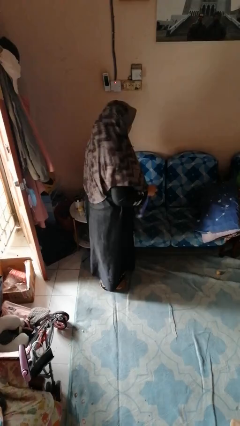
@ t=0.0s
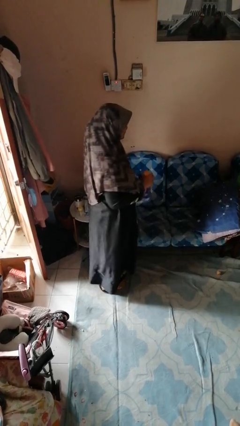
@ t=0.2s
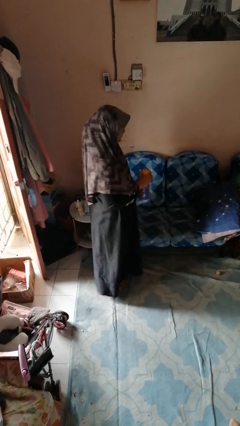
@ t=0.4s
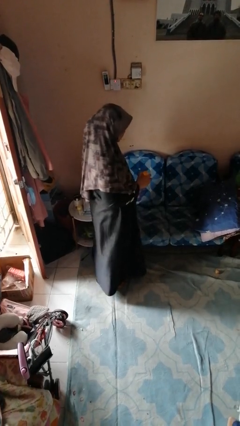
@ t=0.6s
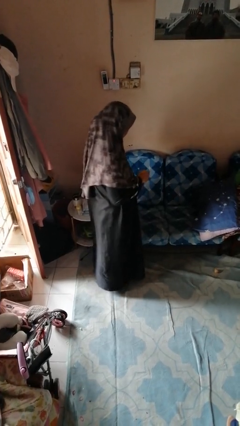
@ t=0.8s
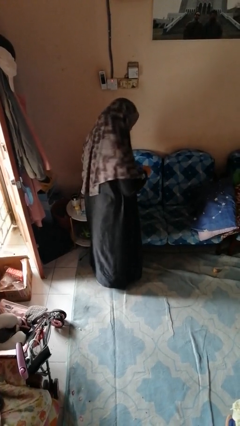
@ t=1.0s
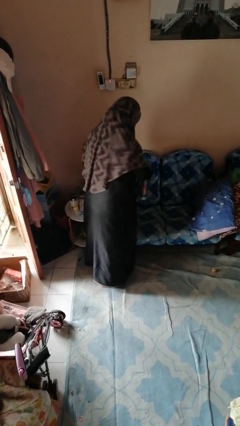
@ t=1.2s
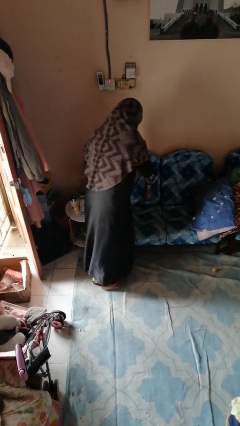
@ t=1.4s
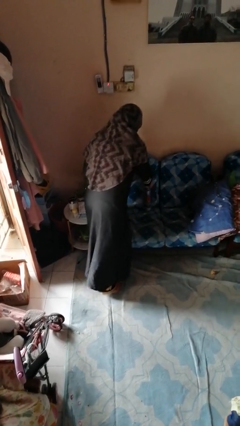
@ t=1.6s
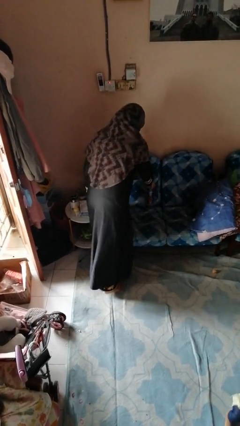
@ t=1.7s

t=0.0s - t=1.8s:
person puts down object on couch

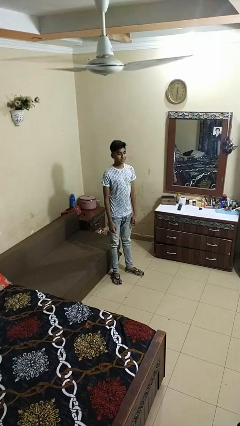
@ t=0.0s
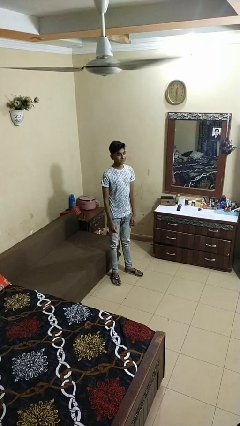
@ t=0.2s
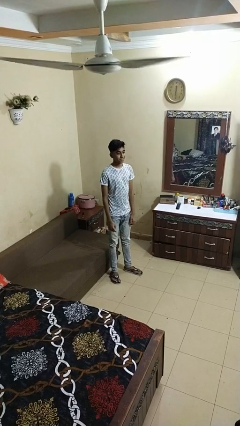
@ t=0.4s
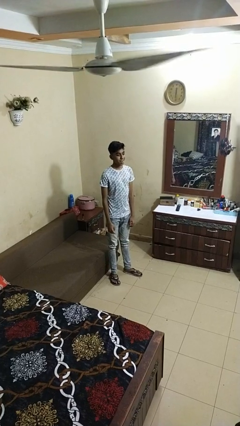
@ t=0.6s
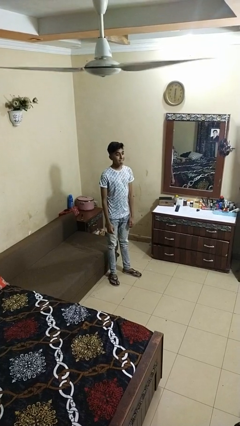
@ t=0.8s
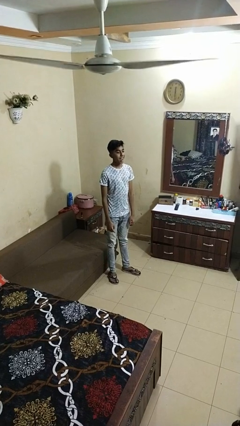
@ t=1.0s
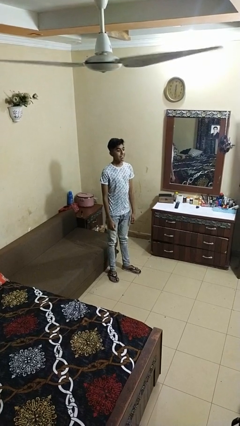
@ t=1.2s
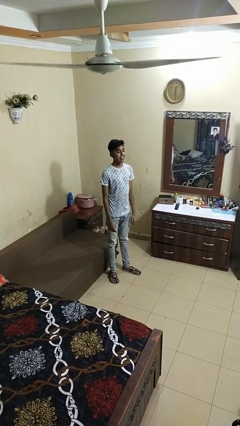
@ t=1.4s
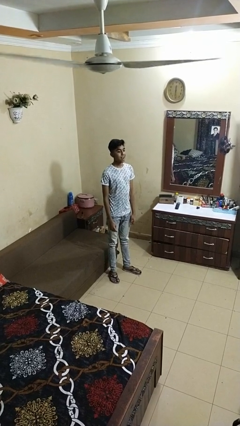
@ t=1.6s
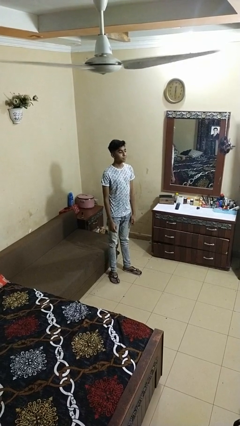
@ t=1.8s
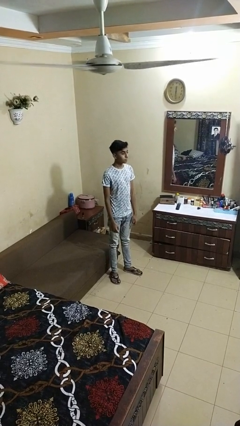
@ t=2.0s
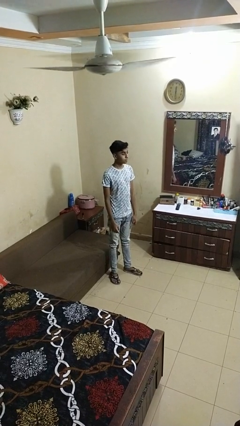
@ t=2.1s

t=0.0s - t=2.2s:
person sticks out tongue

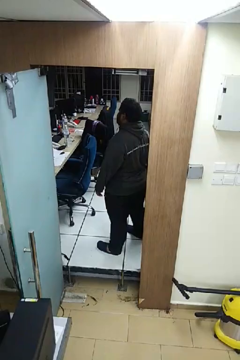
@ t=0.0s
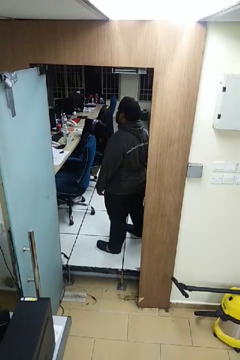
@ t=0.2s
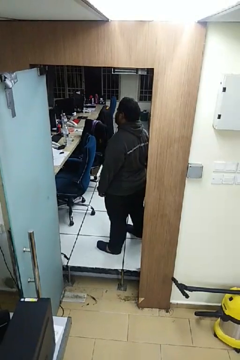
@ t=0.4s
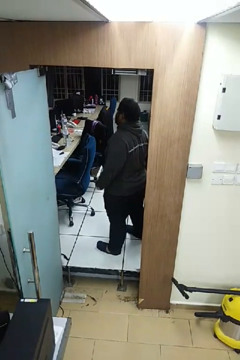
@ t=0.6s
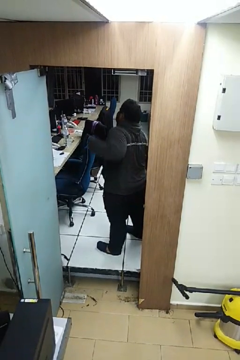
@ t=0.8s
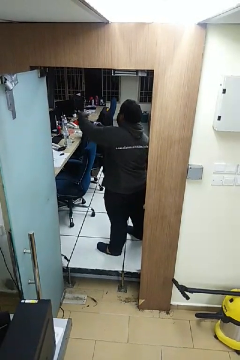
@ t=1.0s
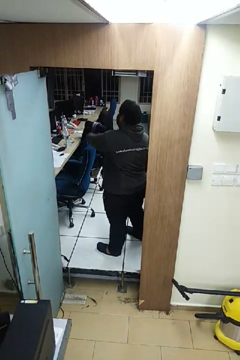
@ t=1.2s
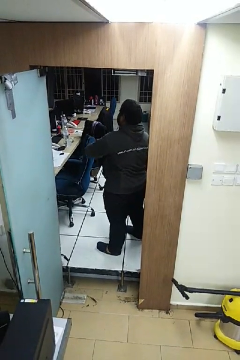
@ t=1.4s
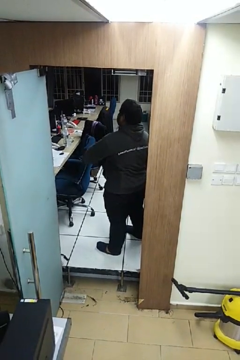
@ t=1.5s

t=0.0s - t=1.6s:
person punches

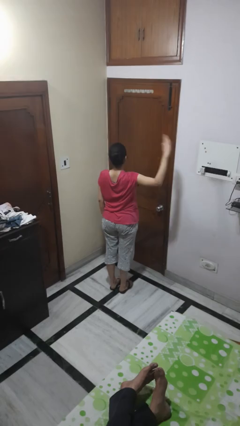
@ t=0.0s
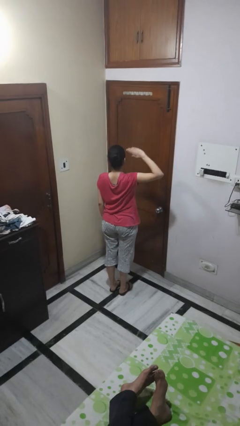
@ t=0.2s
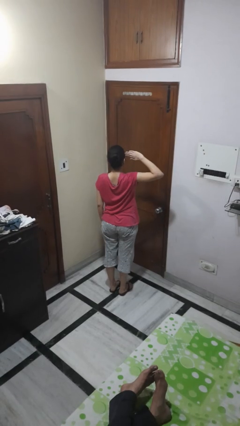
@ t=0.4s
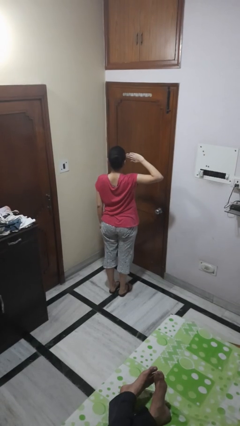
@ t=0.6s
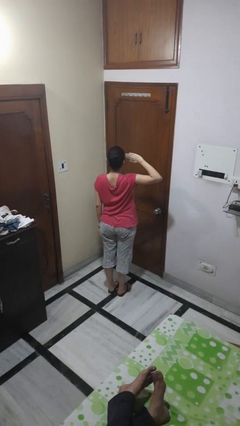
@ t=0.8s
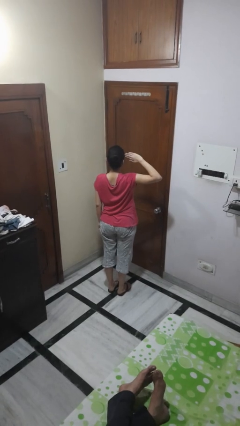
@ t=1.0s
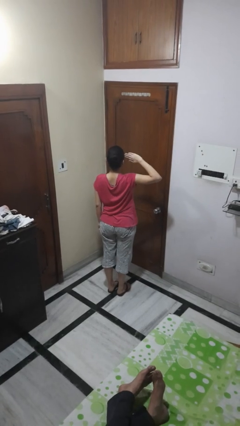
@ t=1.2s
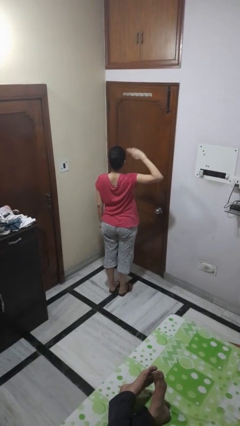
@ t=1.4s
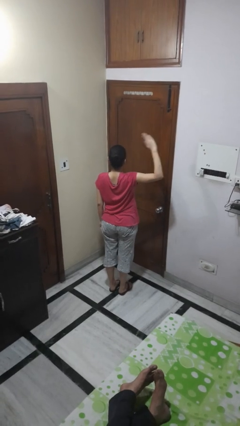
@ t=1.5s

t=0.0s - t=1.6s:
person salutes

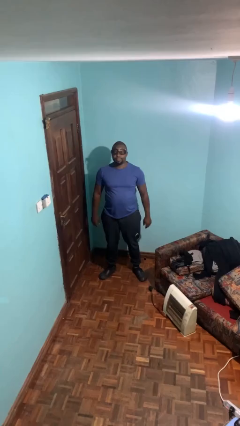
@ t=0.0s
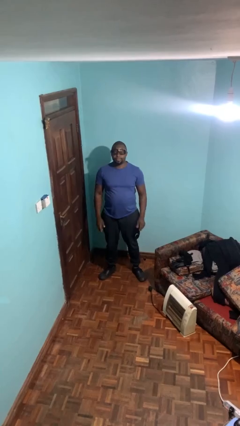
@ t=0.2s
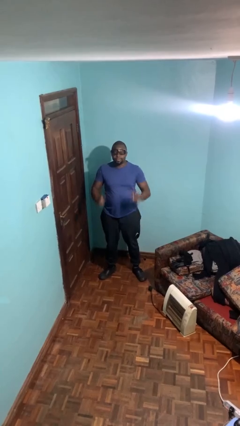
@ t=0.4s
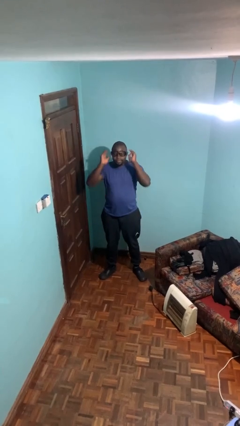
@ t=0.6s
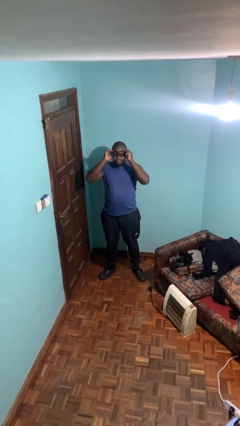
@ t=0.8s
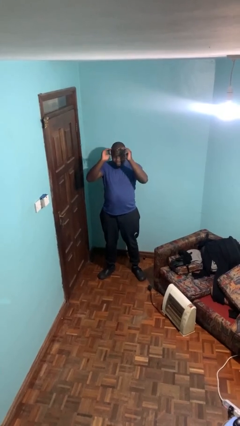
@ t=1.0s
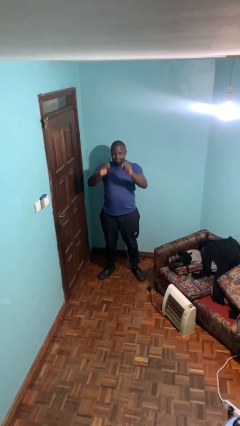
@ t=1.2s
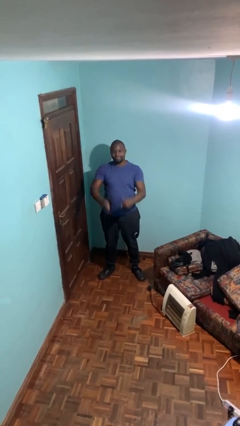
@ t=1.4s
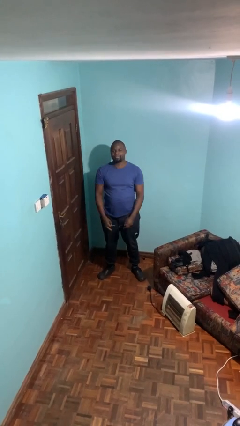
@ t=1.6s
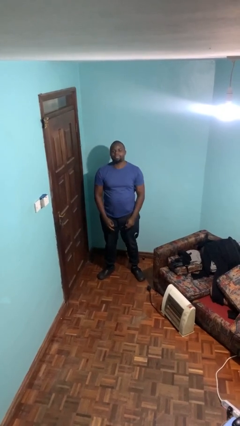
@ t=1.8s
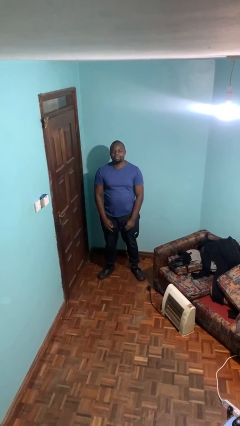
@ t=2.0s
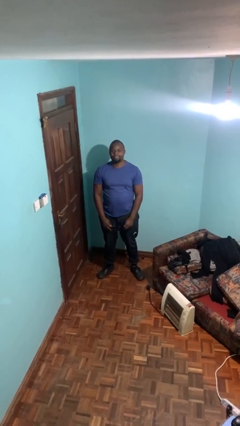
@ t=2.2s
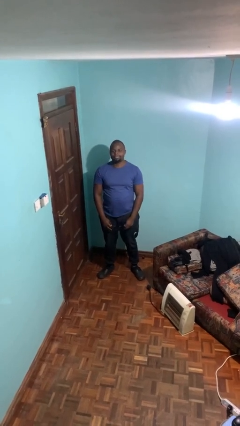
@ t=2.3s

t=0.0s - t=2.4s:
person takes off glasses

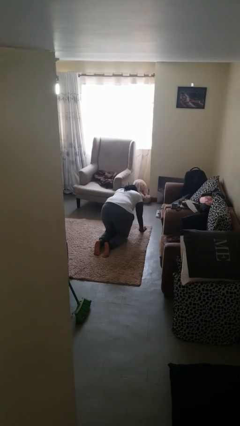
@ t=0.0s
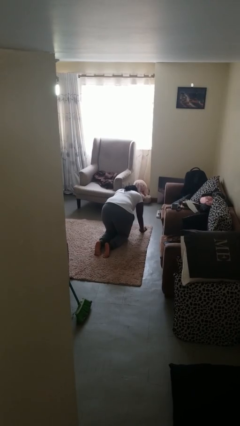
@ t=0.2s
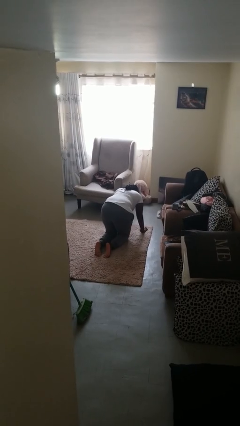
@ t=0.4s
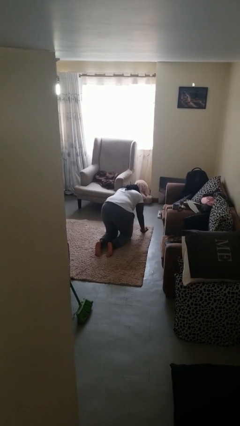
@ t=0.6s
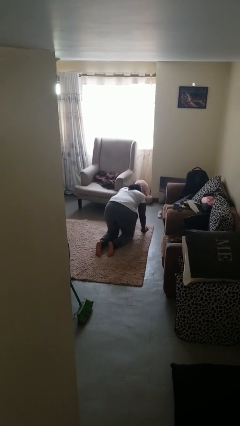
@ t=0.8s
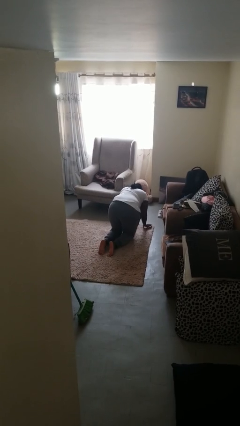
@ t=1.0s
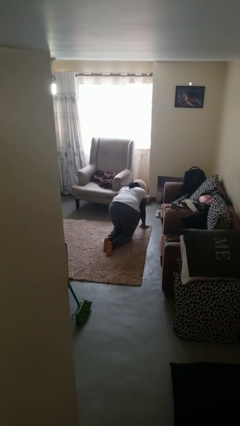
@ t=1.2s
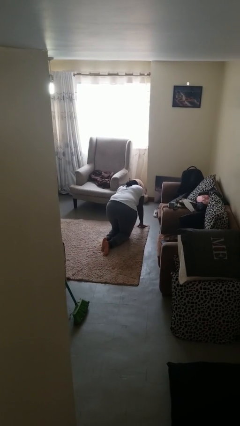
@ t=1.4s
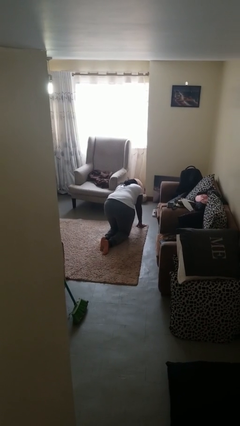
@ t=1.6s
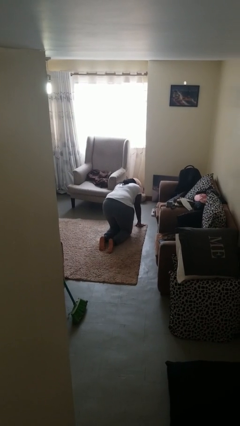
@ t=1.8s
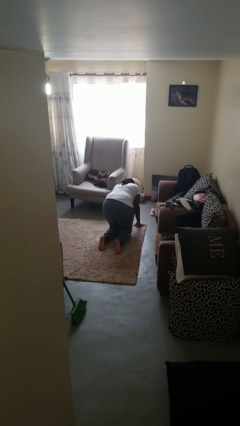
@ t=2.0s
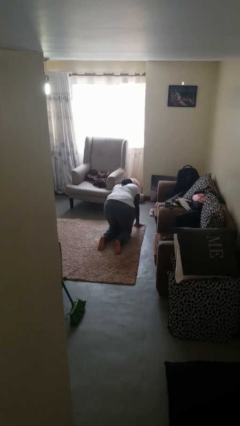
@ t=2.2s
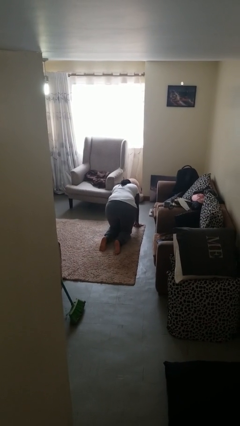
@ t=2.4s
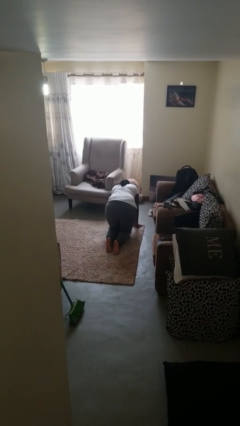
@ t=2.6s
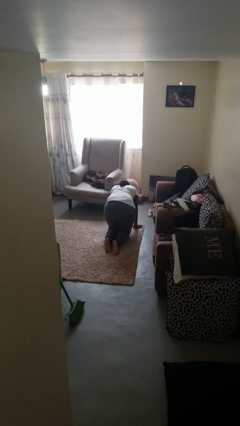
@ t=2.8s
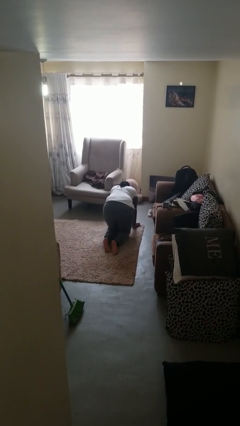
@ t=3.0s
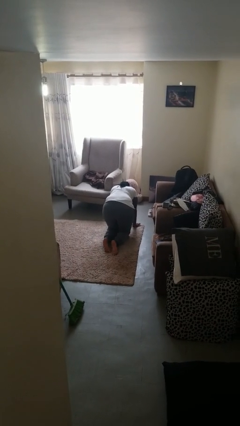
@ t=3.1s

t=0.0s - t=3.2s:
person crawls

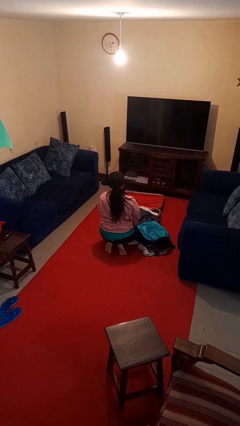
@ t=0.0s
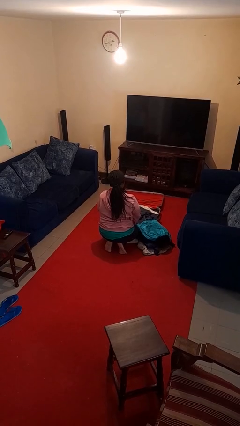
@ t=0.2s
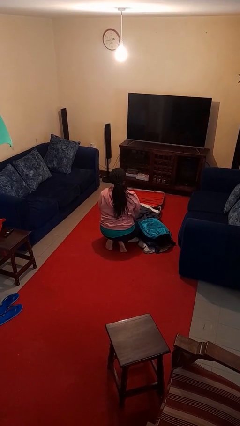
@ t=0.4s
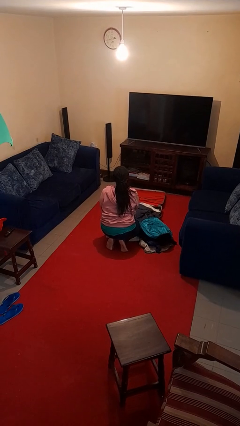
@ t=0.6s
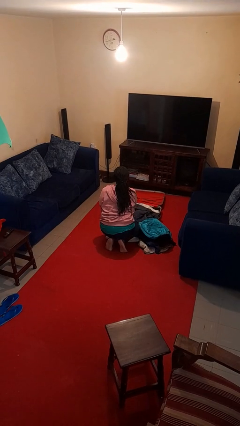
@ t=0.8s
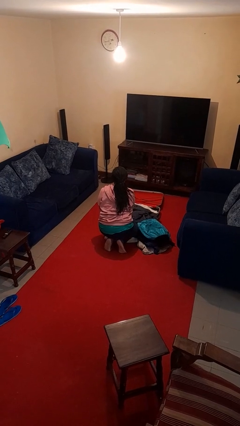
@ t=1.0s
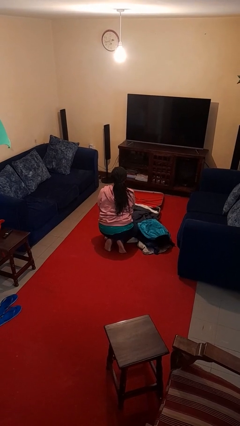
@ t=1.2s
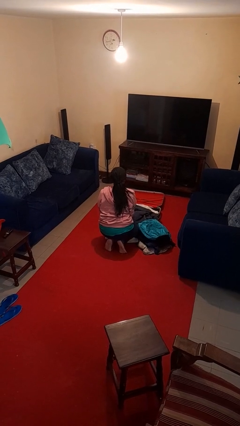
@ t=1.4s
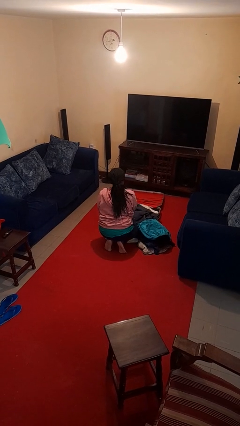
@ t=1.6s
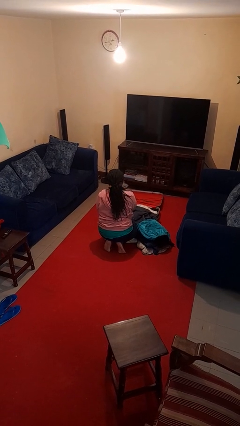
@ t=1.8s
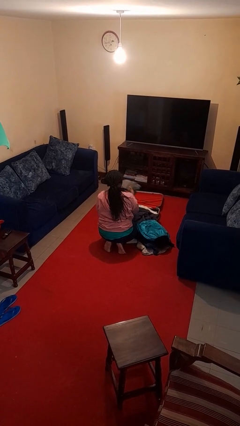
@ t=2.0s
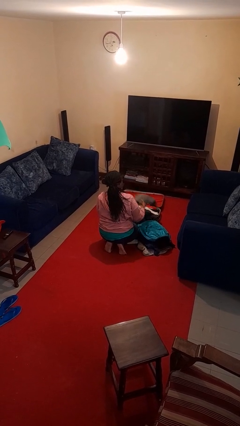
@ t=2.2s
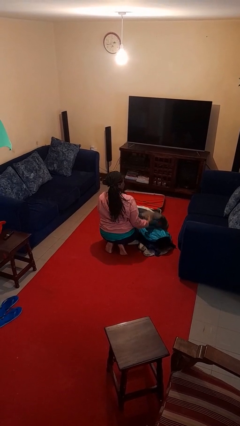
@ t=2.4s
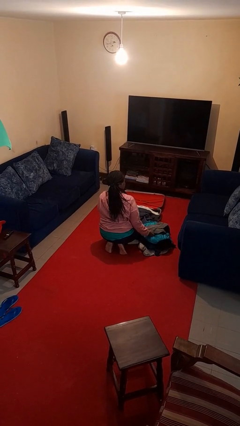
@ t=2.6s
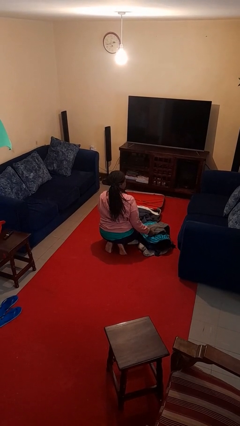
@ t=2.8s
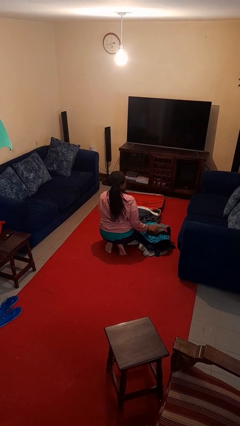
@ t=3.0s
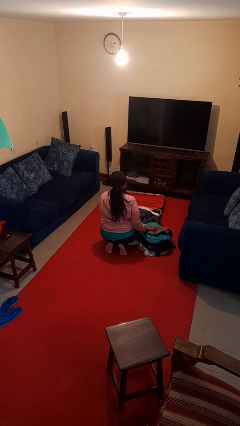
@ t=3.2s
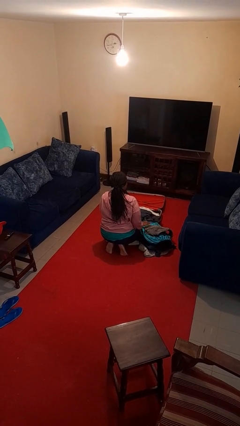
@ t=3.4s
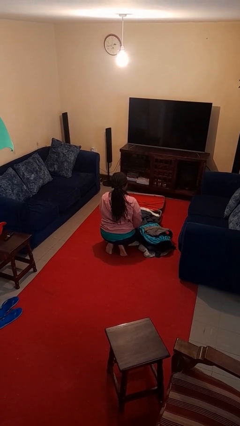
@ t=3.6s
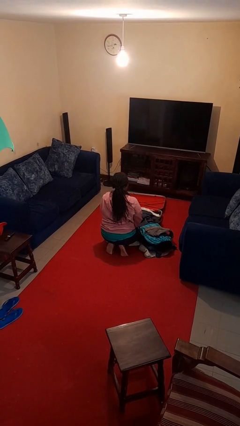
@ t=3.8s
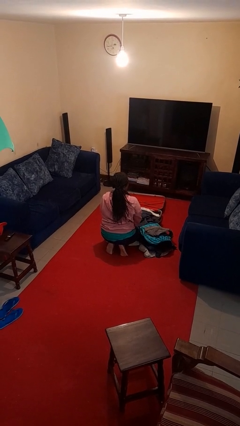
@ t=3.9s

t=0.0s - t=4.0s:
person unloads clothes from suitcase

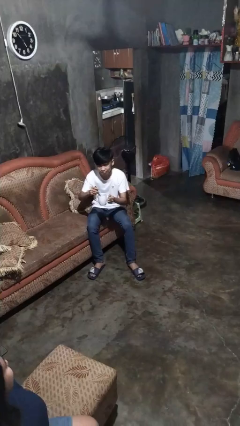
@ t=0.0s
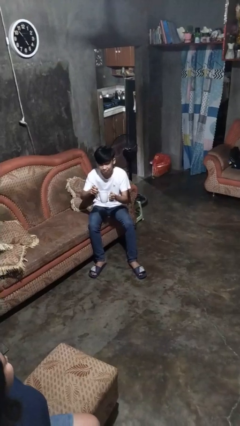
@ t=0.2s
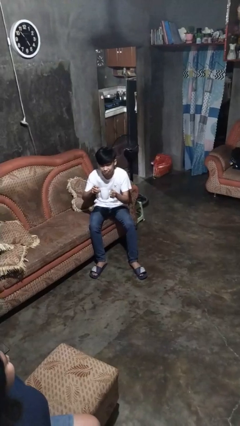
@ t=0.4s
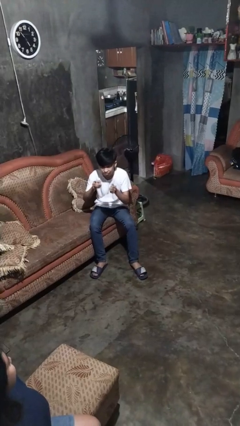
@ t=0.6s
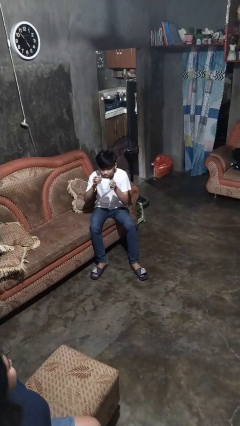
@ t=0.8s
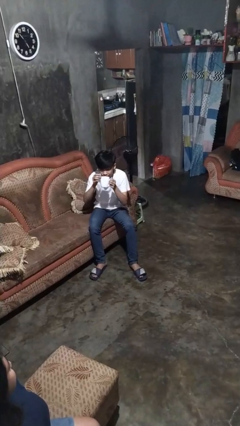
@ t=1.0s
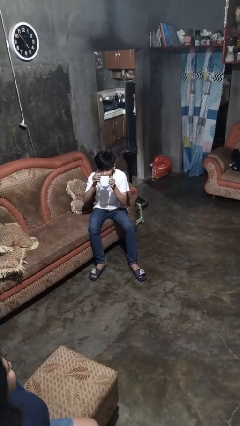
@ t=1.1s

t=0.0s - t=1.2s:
person drinks from mug
